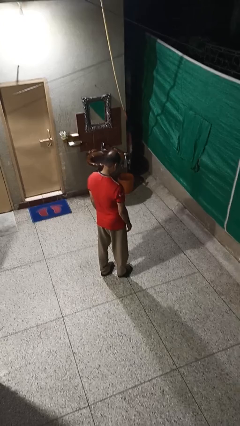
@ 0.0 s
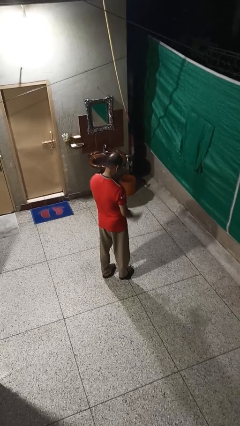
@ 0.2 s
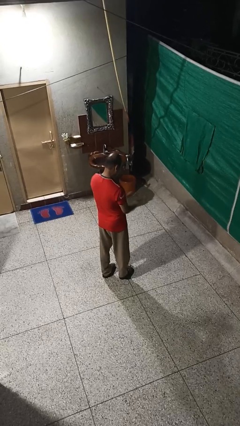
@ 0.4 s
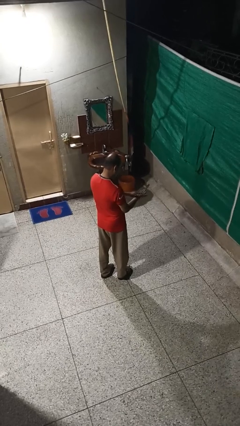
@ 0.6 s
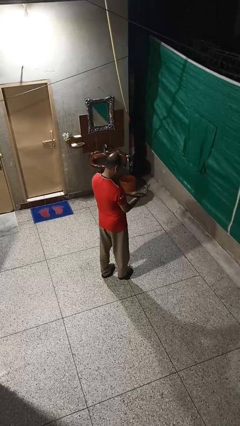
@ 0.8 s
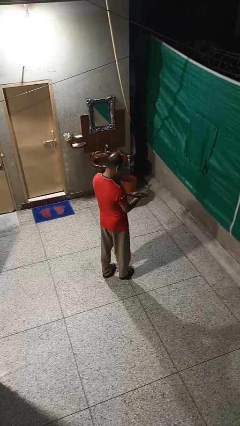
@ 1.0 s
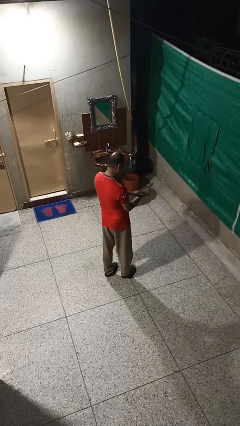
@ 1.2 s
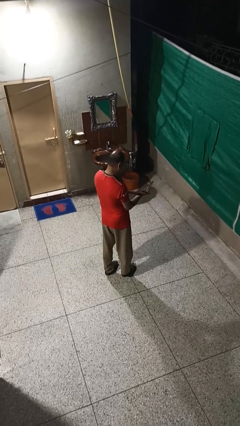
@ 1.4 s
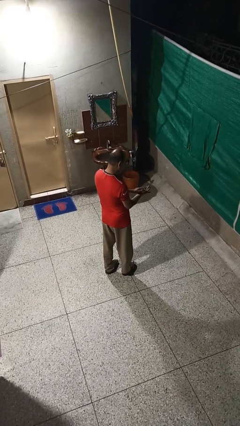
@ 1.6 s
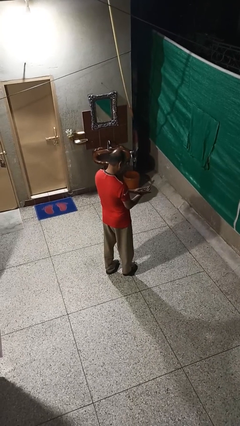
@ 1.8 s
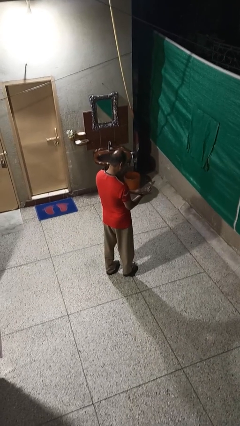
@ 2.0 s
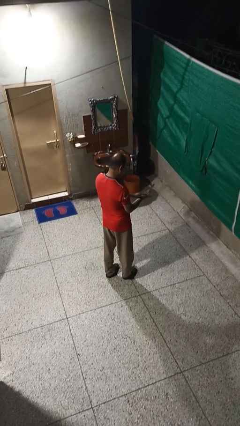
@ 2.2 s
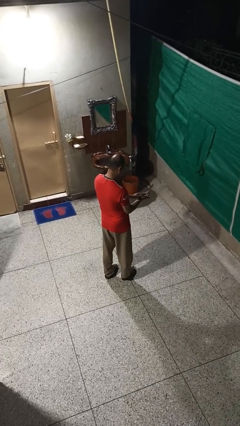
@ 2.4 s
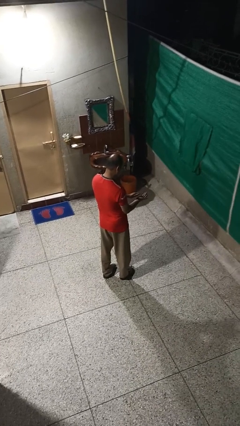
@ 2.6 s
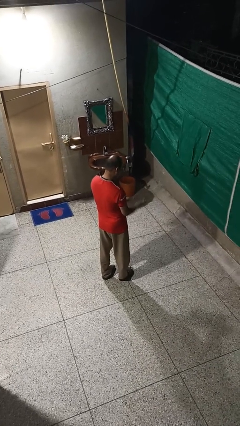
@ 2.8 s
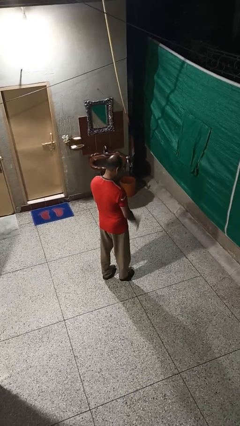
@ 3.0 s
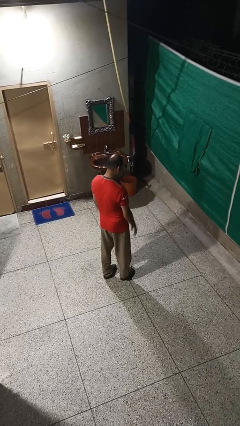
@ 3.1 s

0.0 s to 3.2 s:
person claps hands

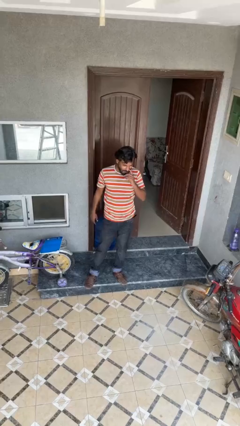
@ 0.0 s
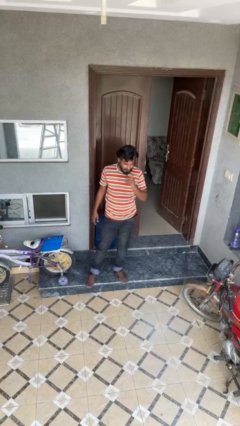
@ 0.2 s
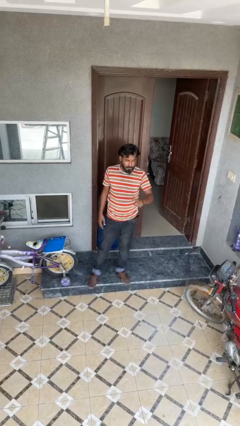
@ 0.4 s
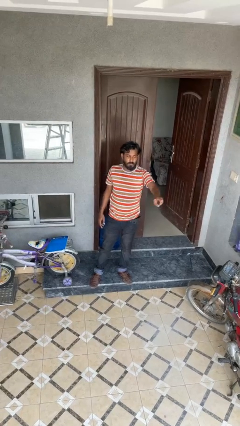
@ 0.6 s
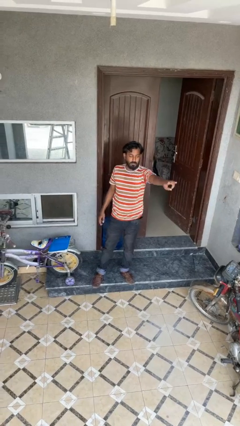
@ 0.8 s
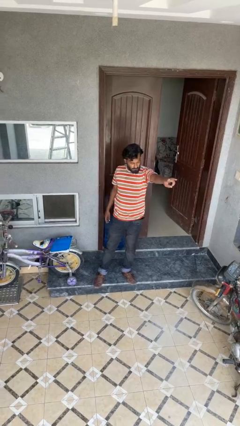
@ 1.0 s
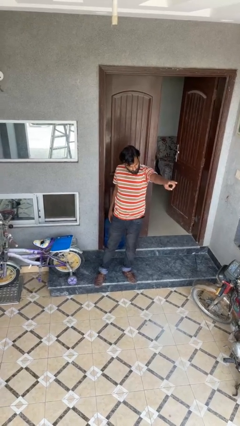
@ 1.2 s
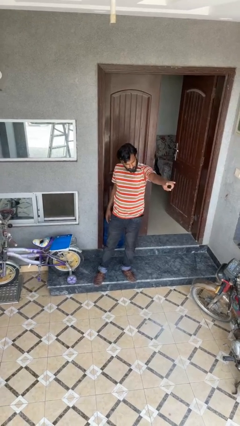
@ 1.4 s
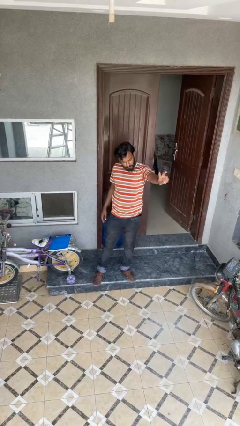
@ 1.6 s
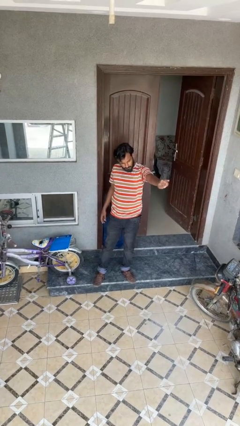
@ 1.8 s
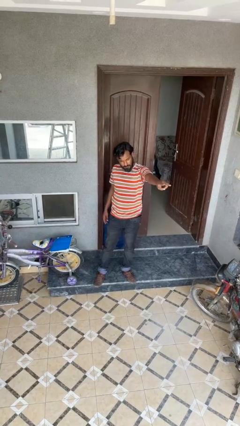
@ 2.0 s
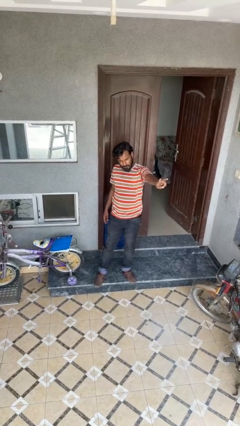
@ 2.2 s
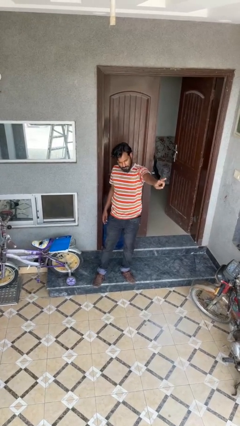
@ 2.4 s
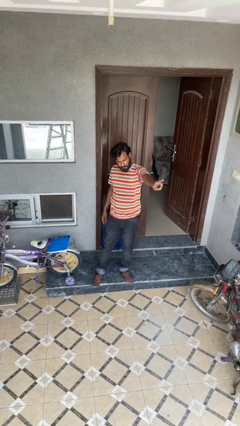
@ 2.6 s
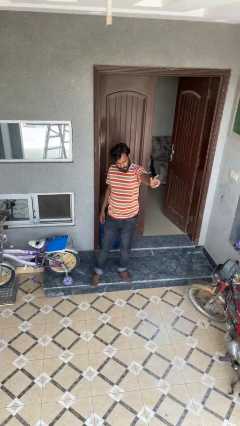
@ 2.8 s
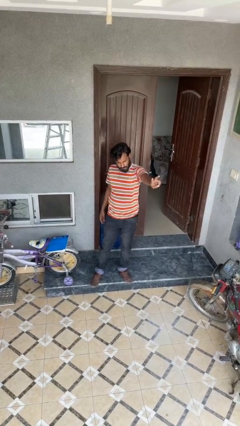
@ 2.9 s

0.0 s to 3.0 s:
person gestures peace

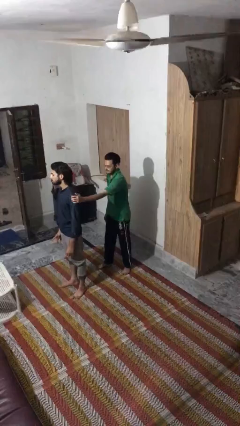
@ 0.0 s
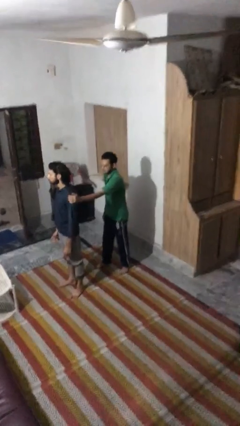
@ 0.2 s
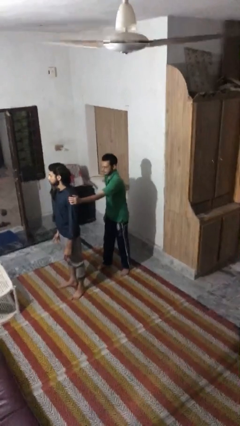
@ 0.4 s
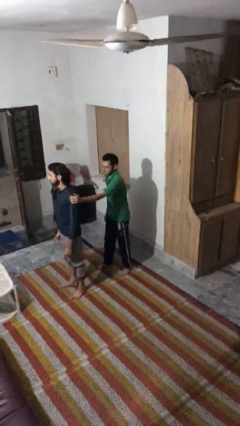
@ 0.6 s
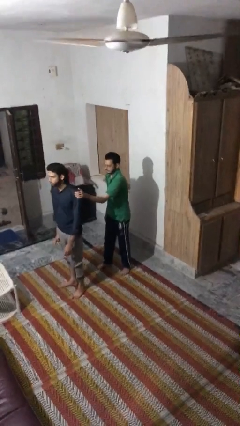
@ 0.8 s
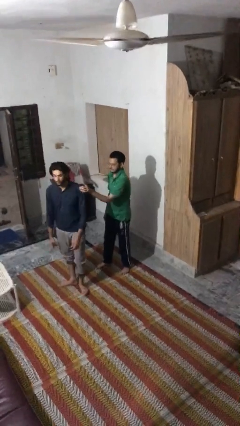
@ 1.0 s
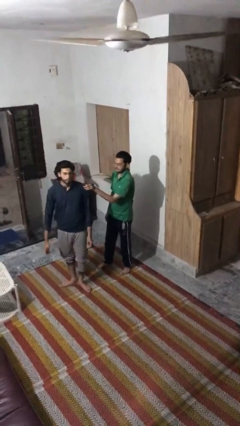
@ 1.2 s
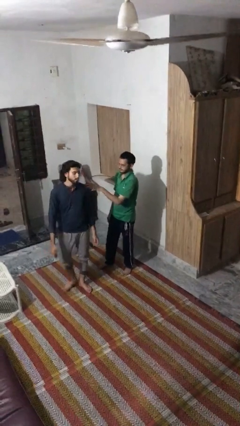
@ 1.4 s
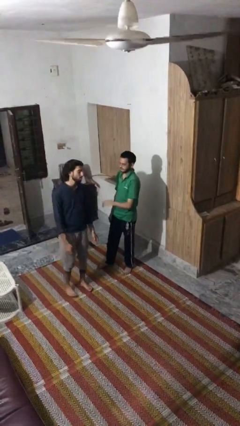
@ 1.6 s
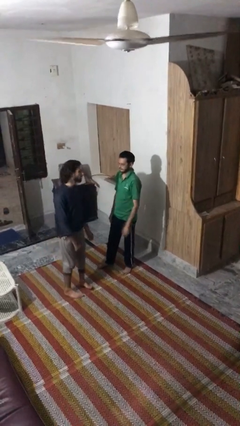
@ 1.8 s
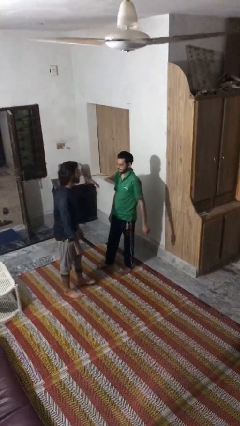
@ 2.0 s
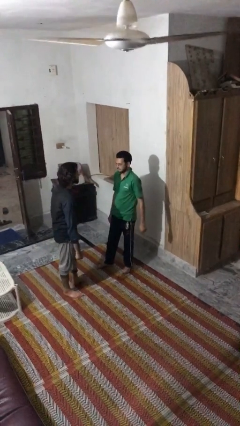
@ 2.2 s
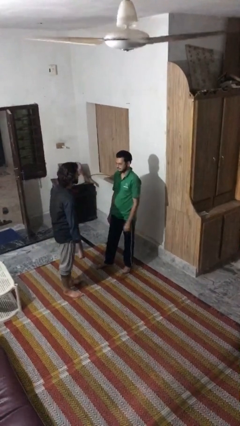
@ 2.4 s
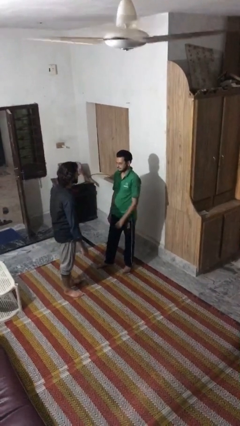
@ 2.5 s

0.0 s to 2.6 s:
person spins person around

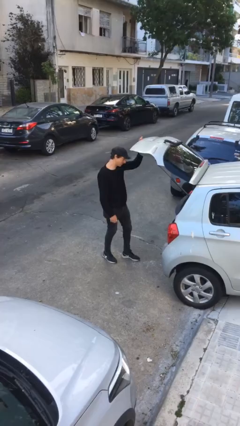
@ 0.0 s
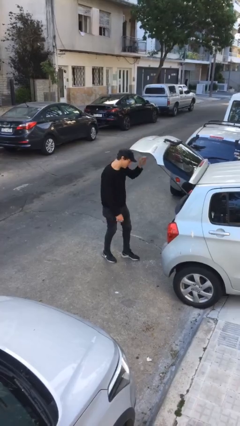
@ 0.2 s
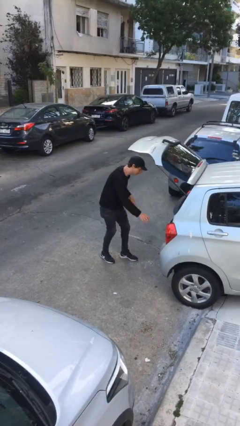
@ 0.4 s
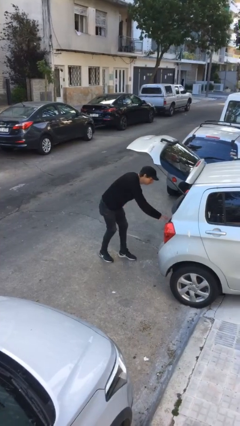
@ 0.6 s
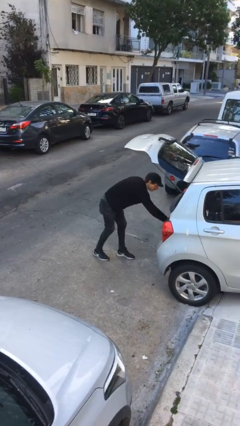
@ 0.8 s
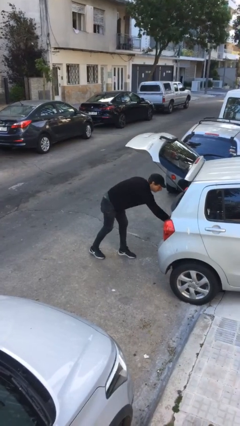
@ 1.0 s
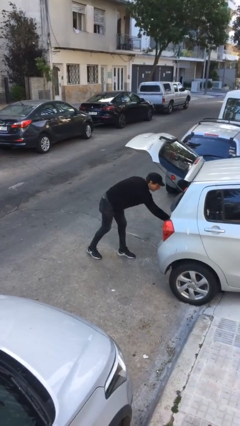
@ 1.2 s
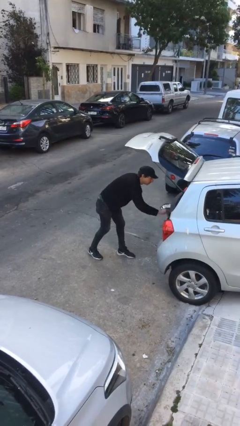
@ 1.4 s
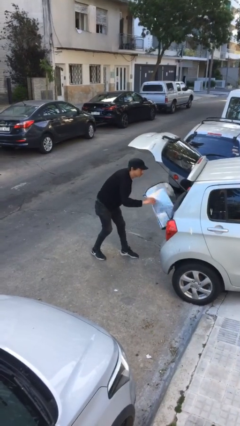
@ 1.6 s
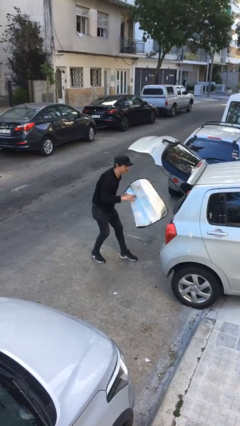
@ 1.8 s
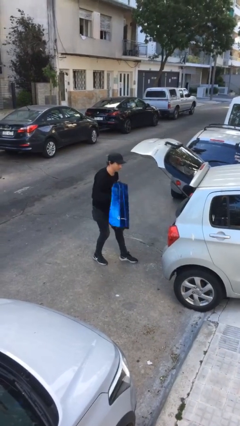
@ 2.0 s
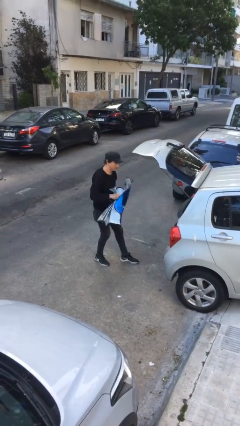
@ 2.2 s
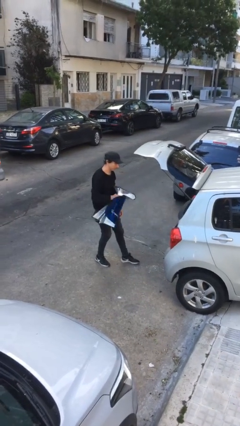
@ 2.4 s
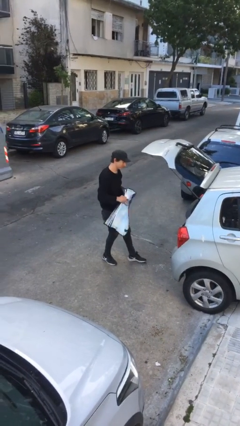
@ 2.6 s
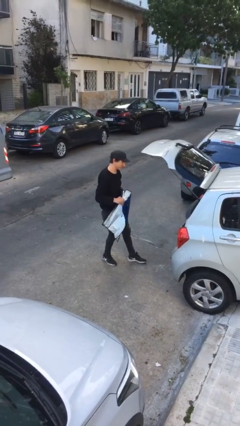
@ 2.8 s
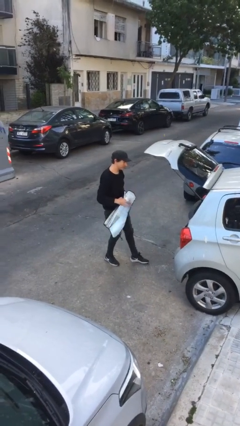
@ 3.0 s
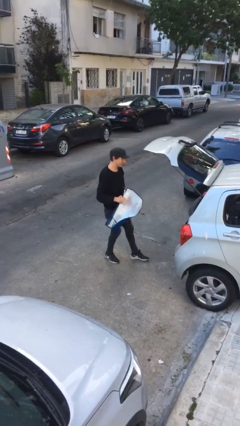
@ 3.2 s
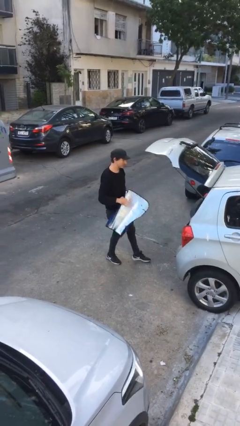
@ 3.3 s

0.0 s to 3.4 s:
person unloads car

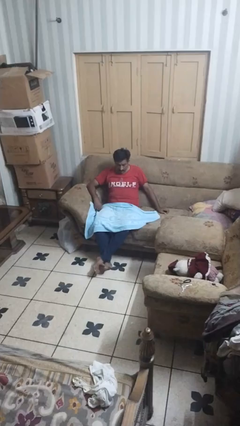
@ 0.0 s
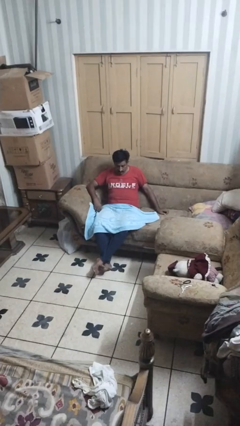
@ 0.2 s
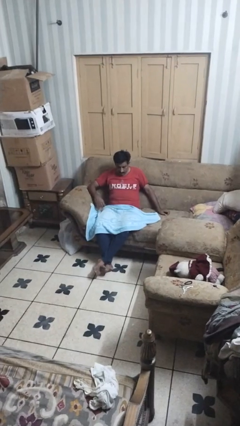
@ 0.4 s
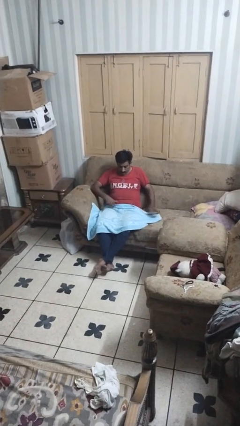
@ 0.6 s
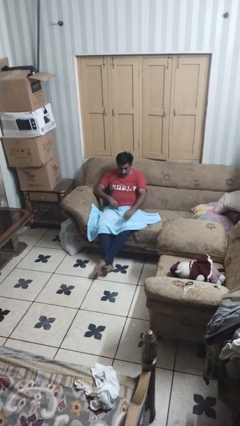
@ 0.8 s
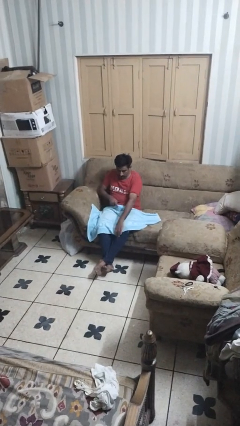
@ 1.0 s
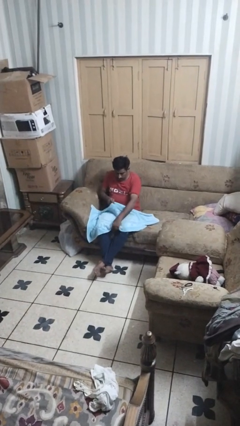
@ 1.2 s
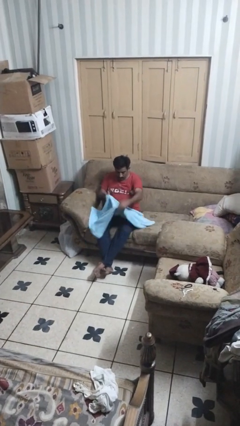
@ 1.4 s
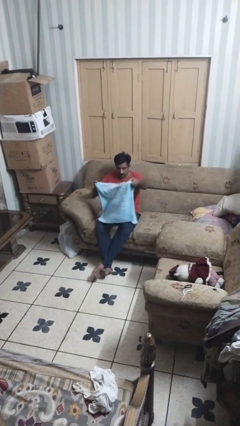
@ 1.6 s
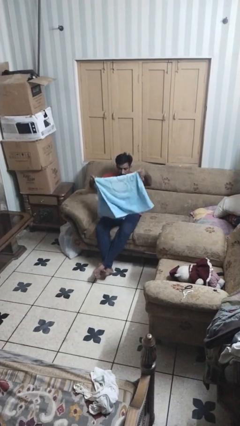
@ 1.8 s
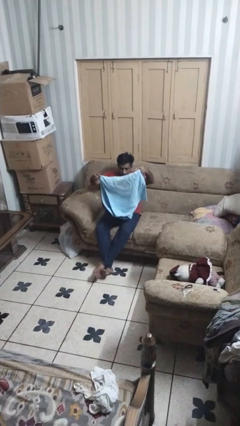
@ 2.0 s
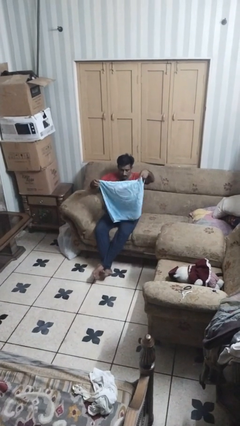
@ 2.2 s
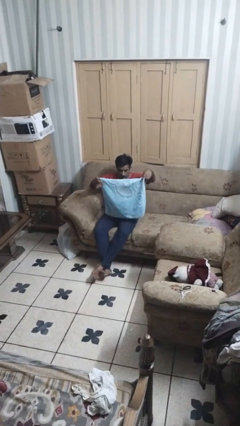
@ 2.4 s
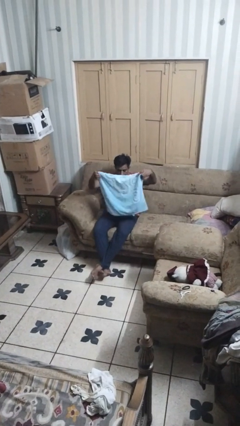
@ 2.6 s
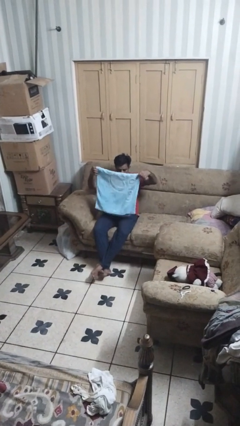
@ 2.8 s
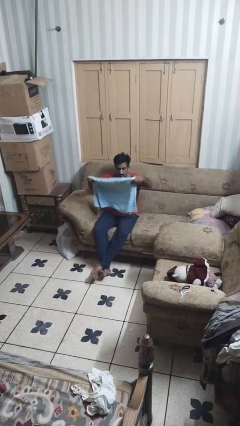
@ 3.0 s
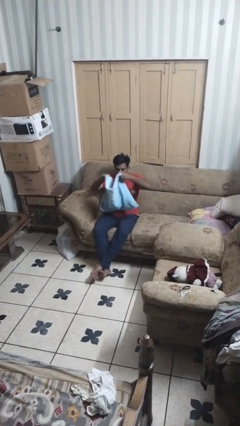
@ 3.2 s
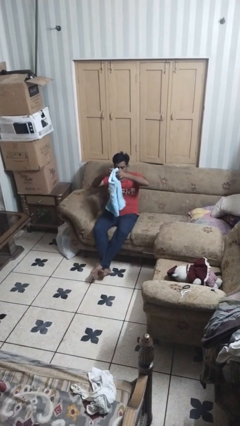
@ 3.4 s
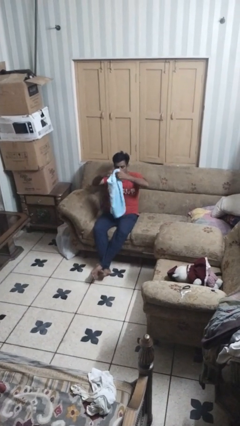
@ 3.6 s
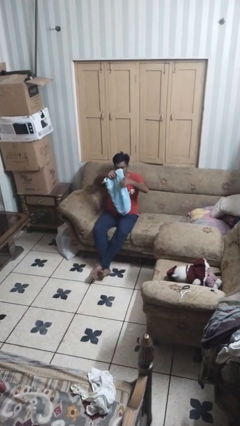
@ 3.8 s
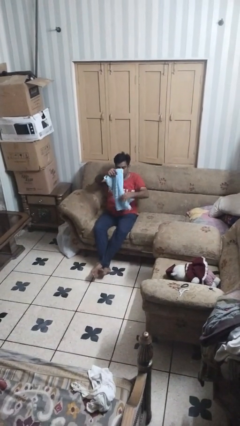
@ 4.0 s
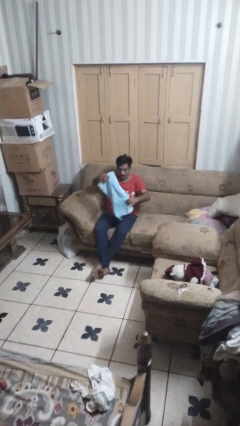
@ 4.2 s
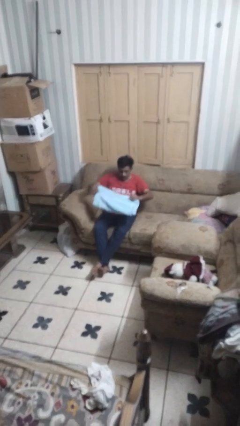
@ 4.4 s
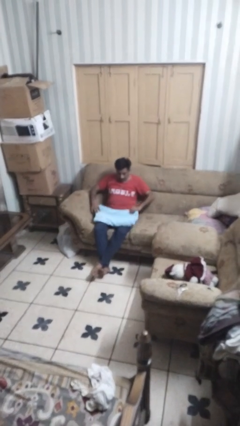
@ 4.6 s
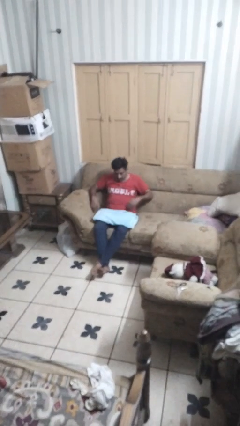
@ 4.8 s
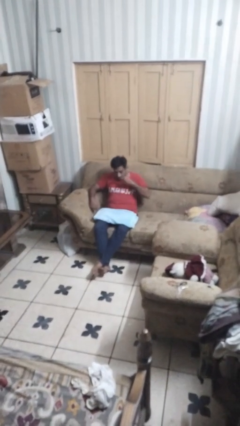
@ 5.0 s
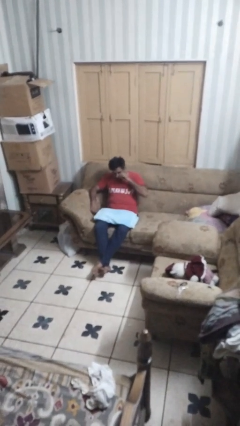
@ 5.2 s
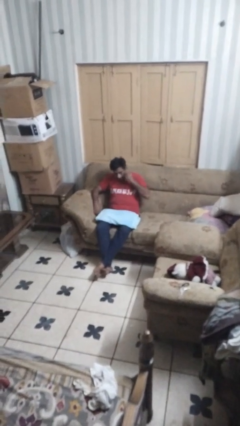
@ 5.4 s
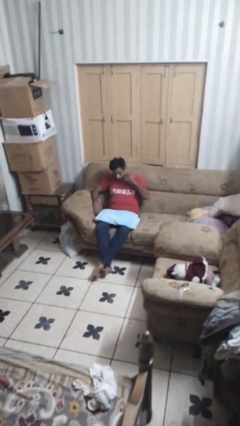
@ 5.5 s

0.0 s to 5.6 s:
person folds towel
